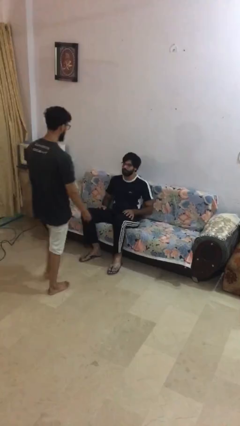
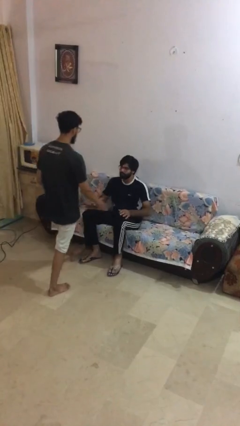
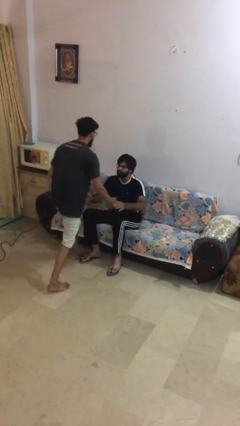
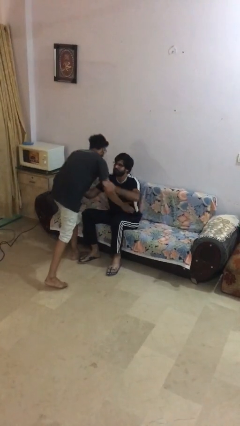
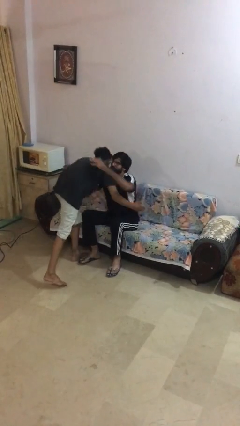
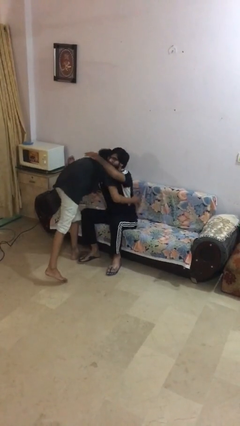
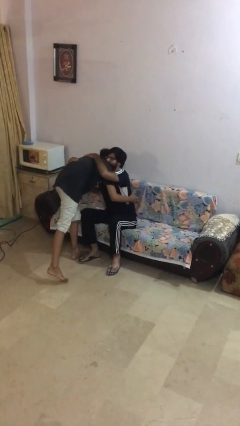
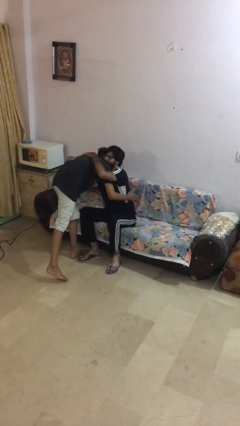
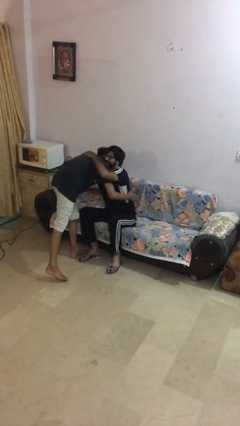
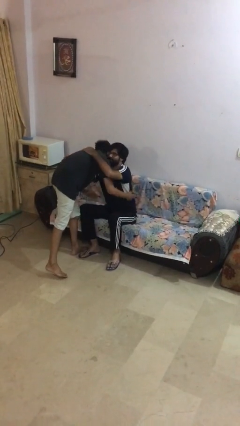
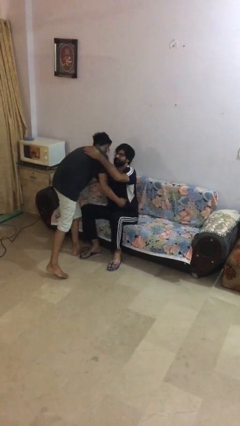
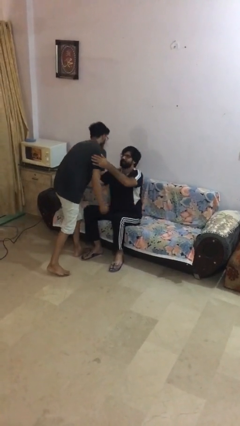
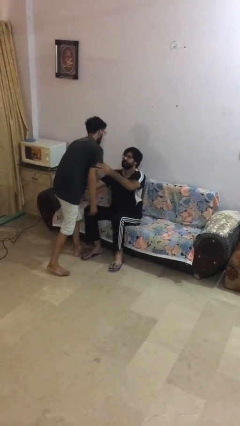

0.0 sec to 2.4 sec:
person embraces person

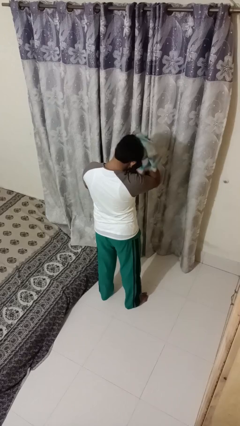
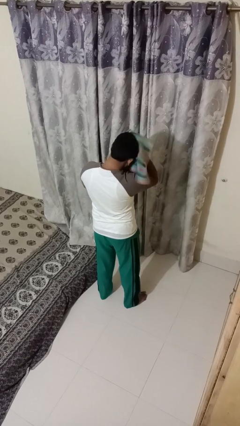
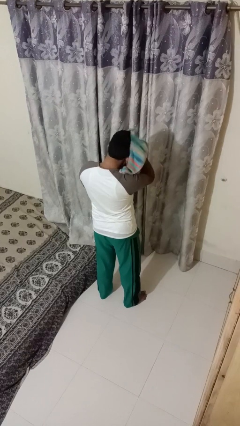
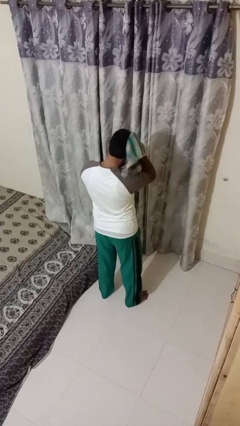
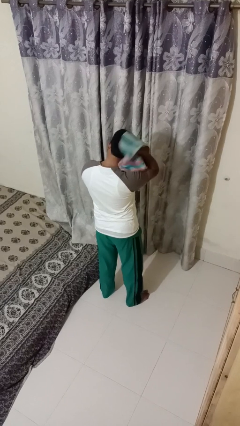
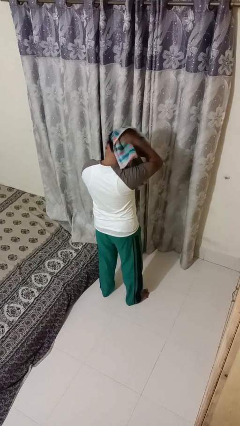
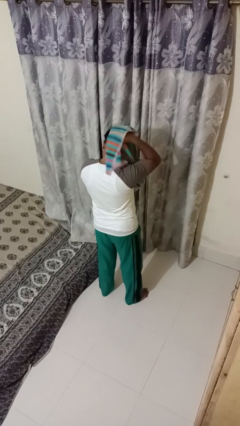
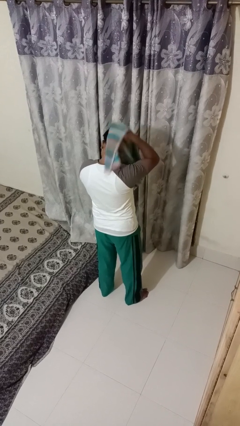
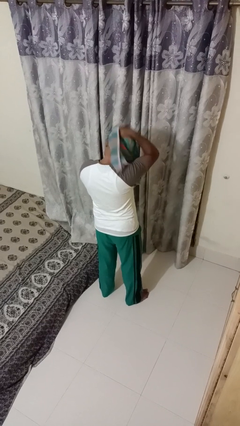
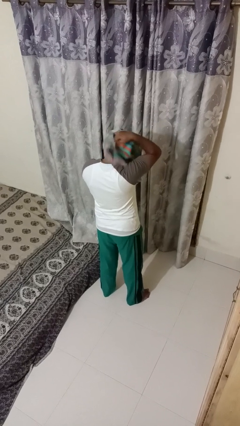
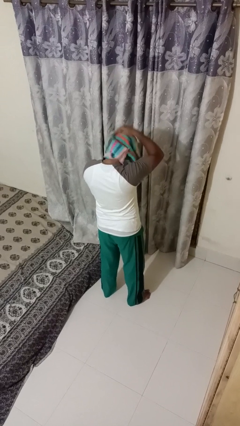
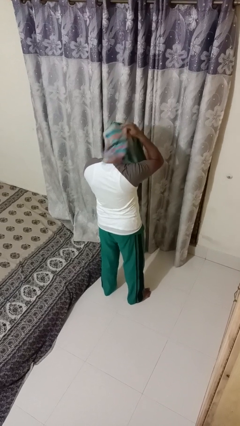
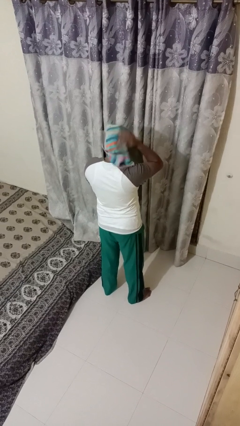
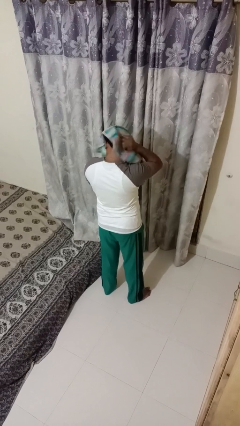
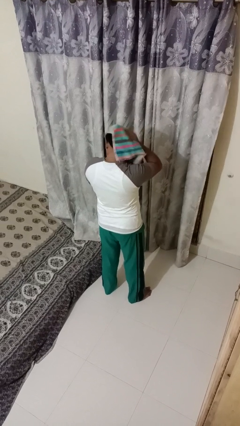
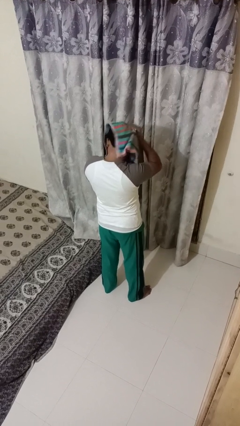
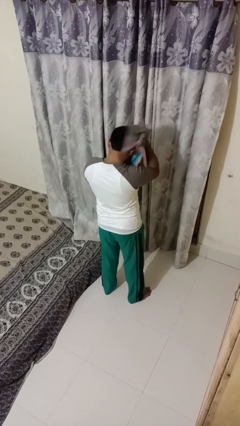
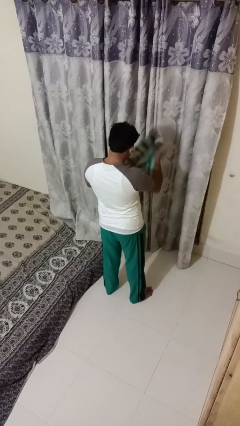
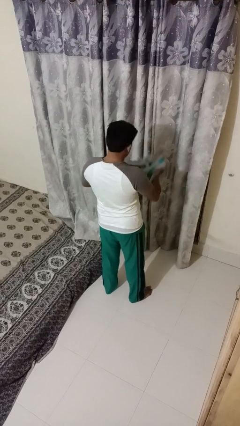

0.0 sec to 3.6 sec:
person dries hair with towel

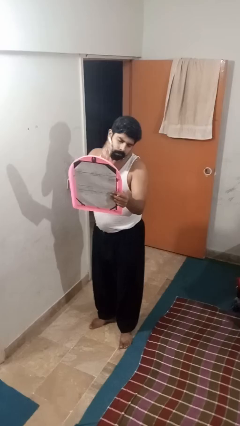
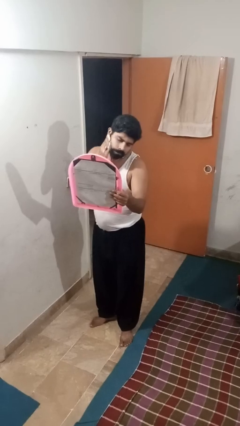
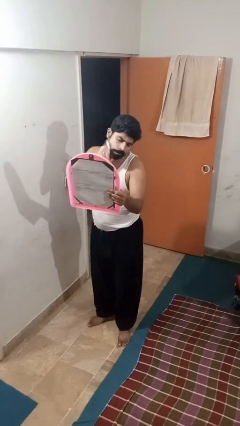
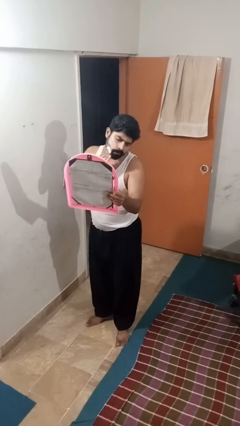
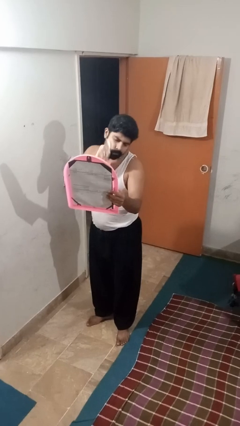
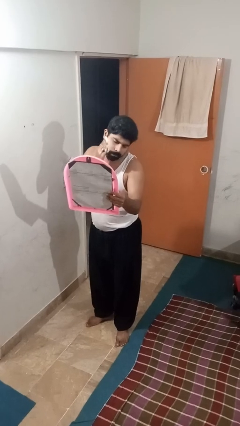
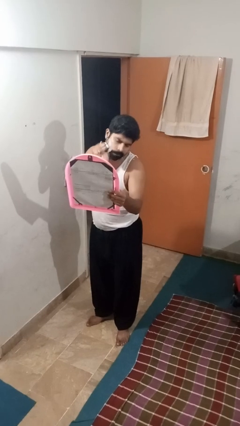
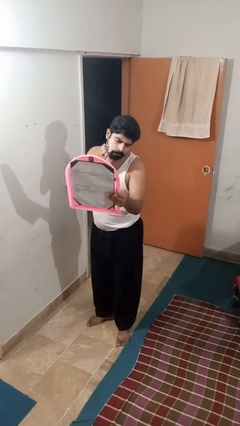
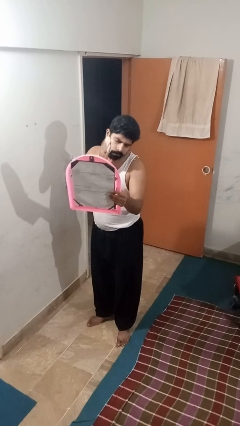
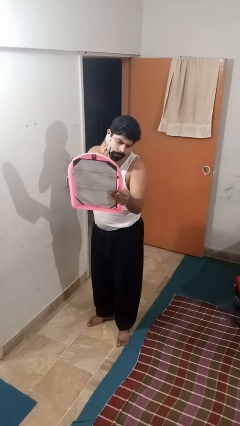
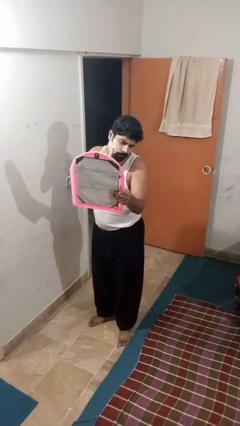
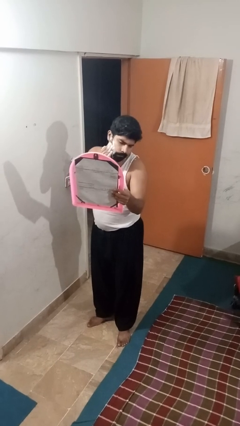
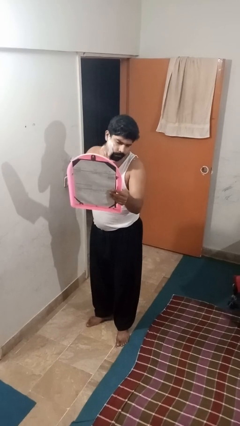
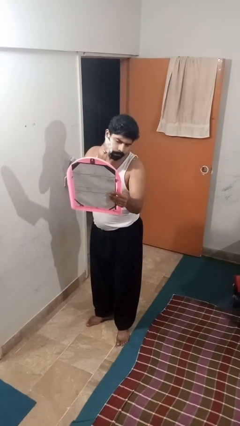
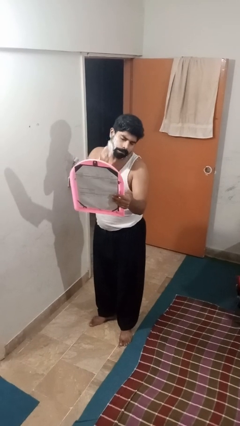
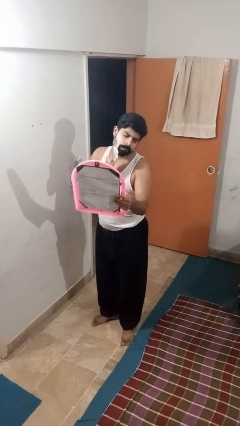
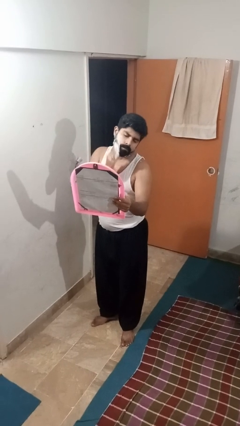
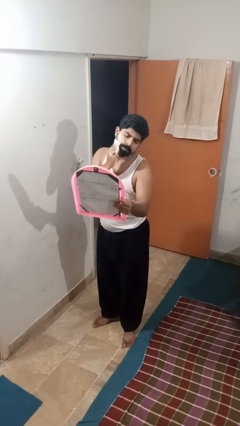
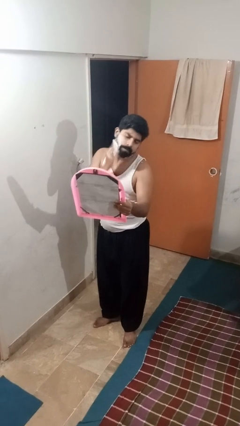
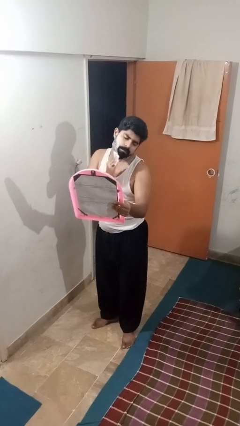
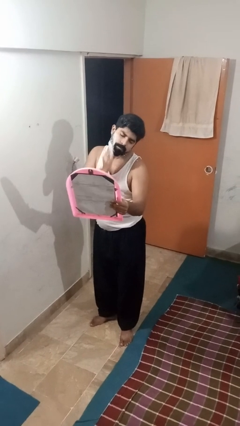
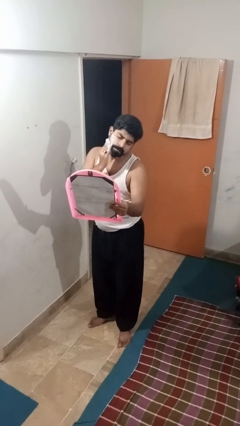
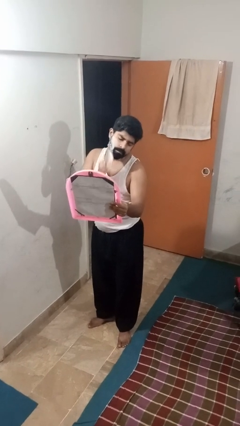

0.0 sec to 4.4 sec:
person applies shaving cream

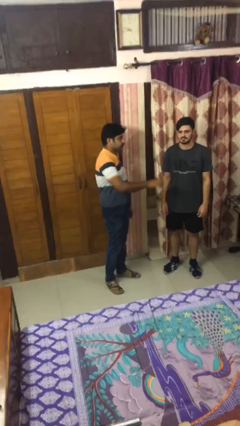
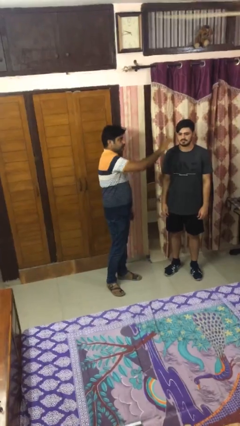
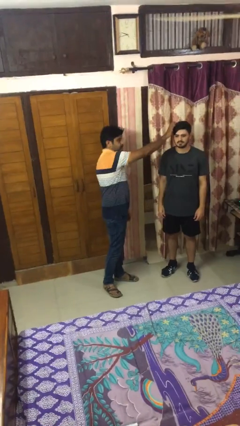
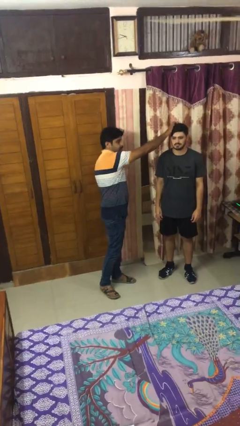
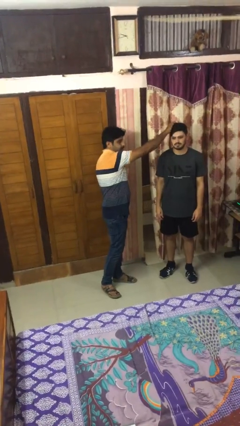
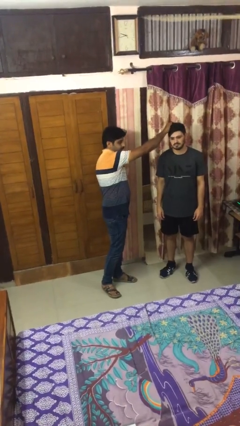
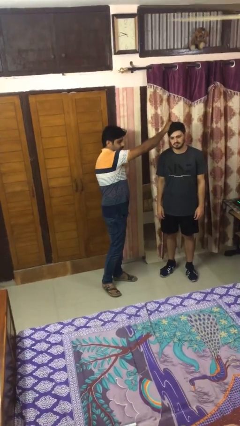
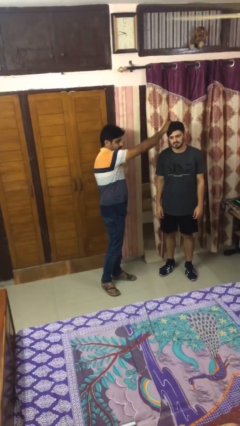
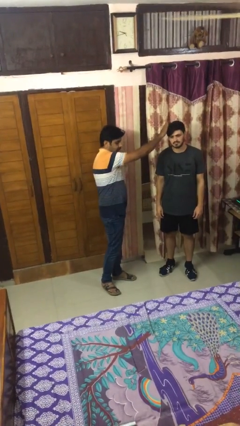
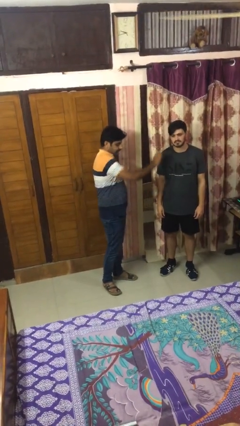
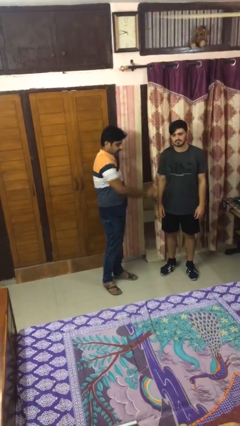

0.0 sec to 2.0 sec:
person grabs person by hair

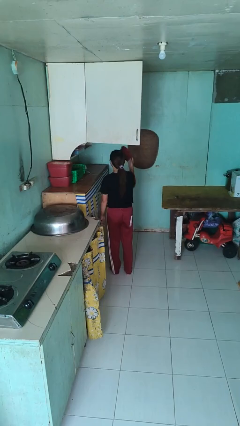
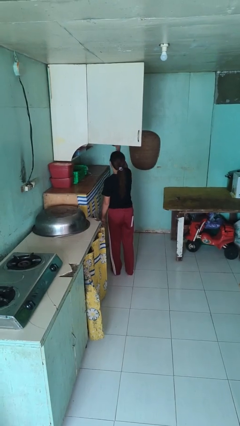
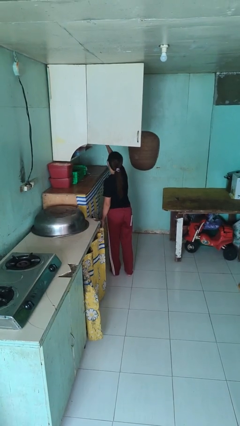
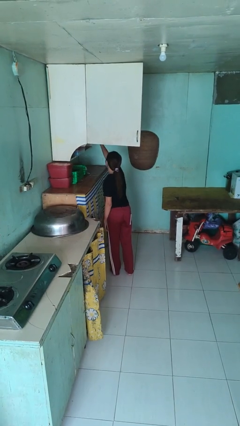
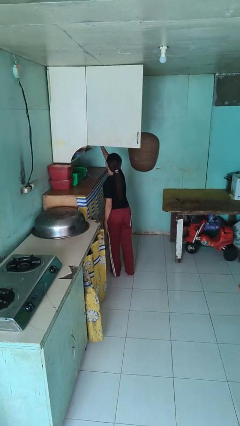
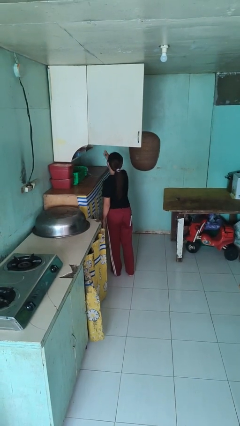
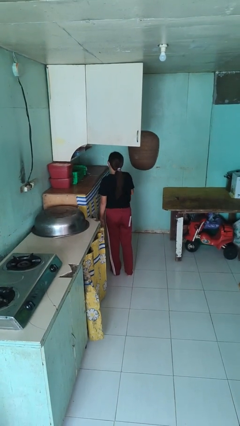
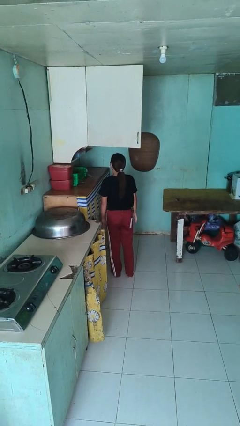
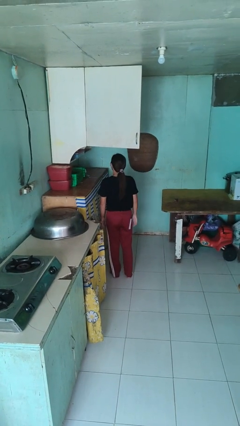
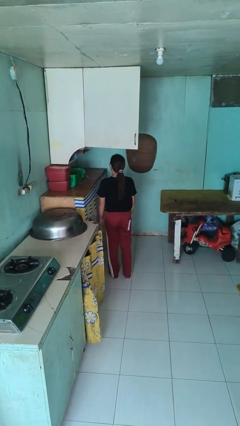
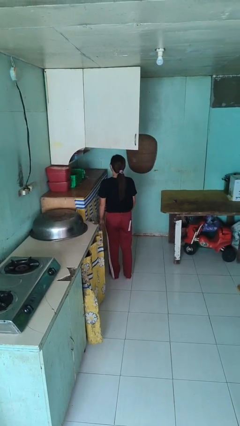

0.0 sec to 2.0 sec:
person puts object in cabinet

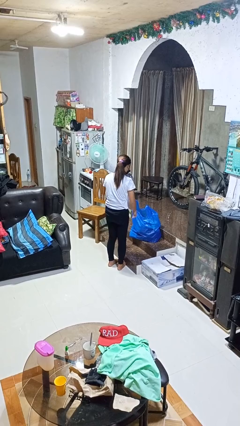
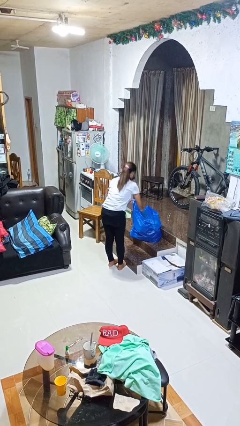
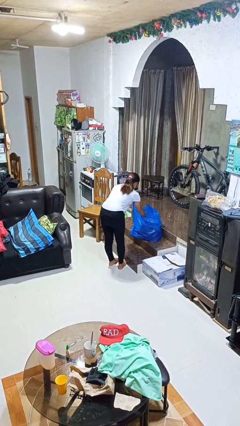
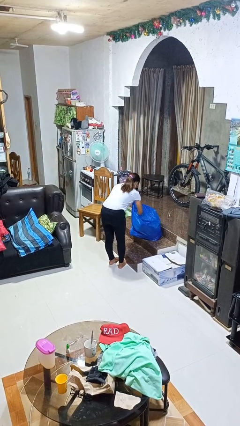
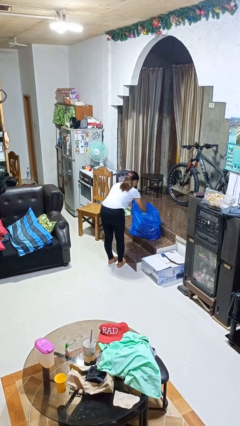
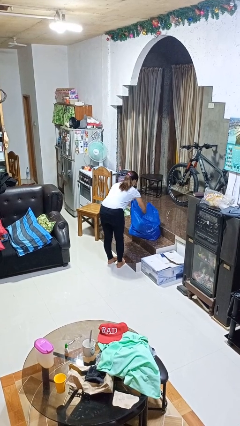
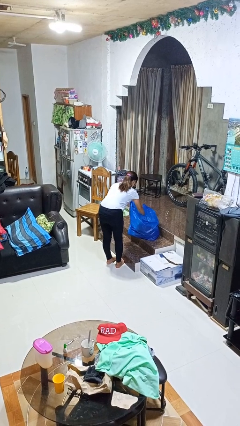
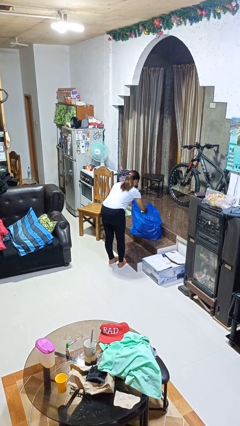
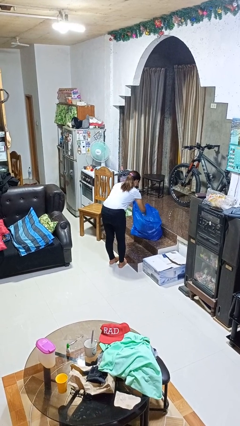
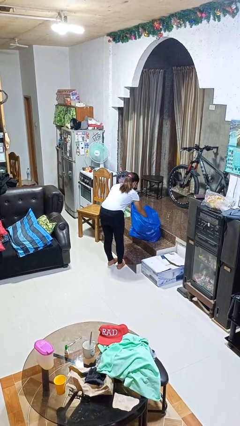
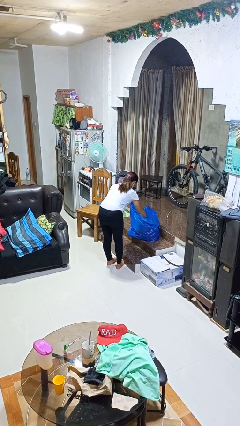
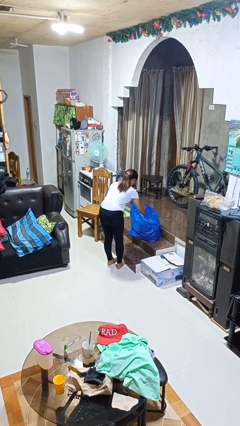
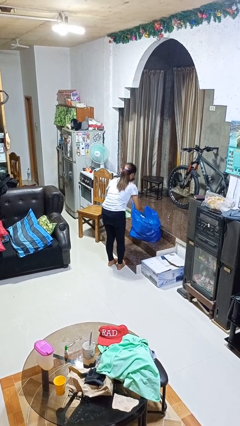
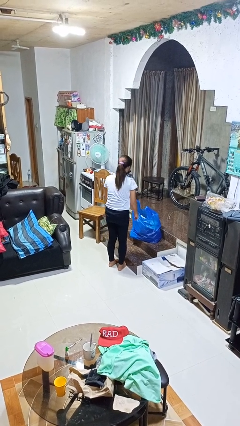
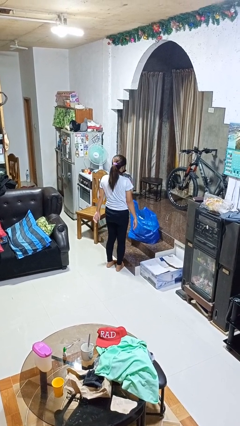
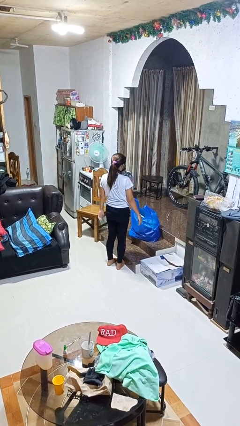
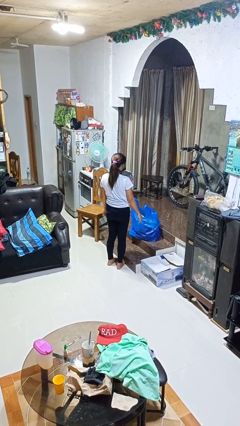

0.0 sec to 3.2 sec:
person searches in bag
